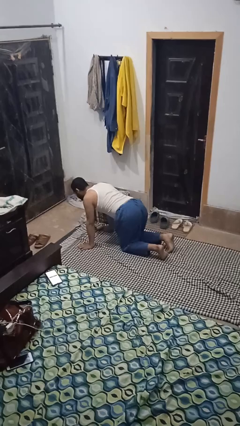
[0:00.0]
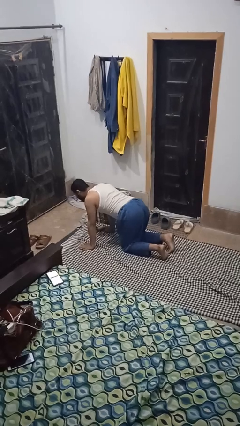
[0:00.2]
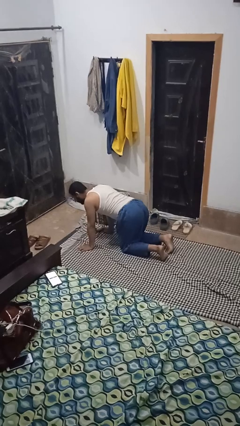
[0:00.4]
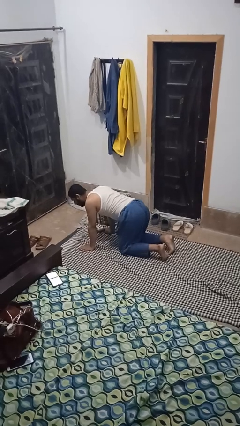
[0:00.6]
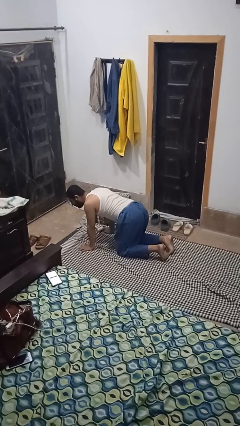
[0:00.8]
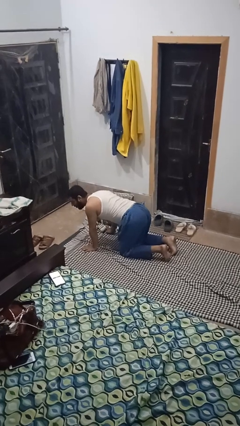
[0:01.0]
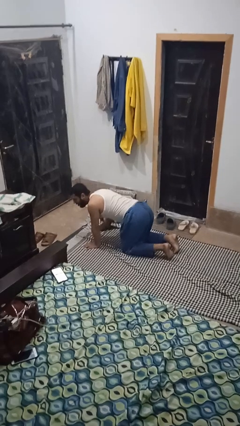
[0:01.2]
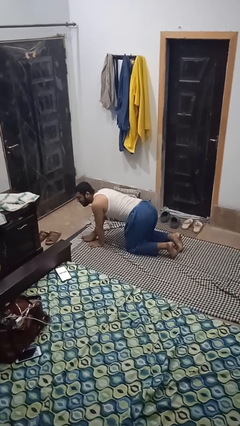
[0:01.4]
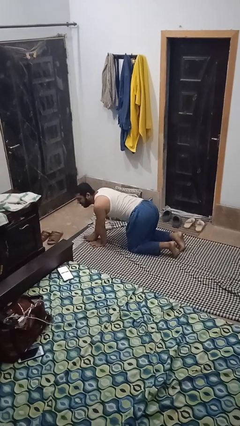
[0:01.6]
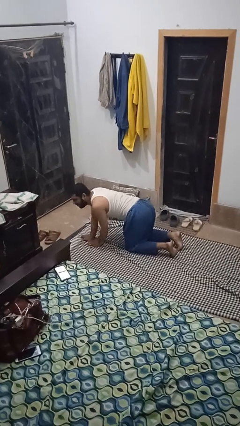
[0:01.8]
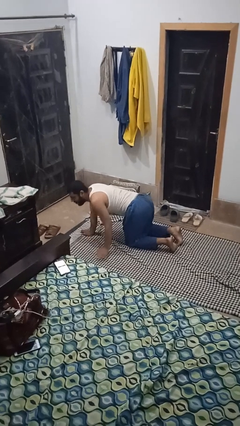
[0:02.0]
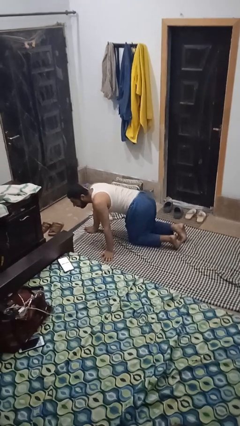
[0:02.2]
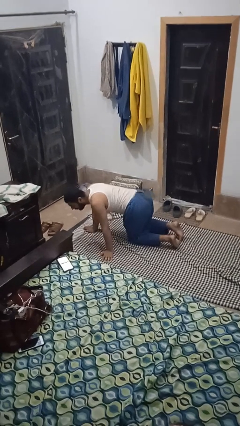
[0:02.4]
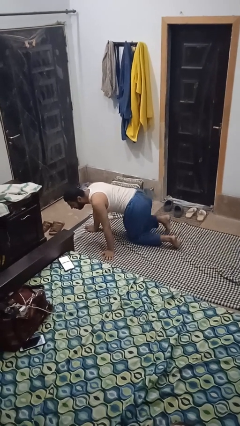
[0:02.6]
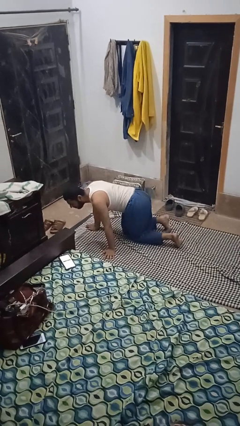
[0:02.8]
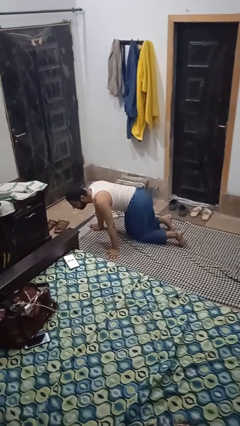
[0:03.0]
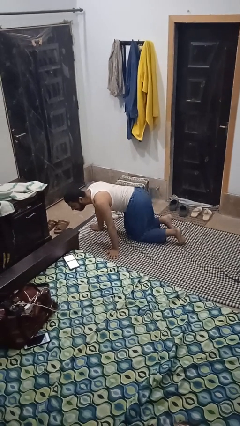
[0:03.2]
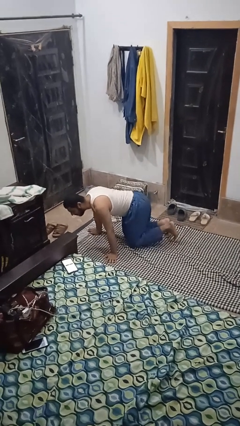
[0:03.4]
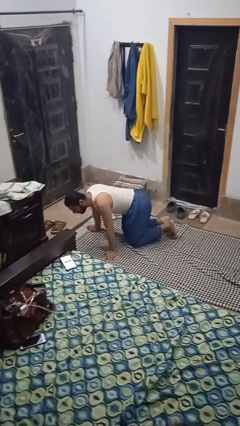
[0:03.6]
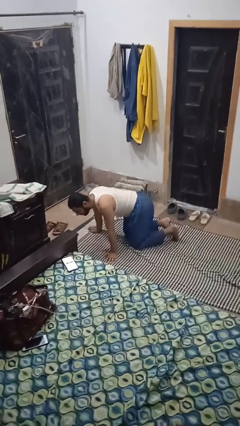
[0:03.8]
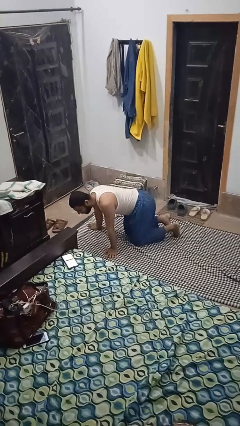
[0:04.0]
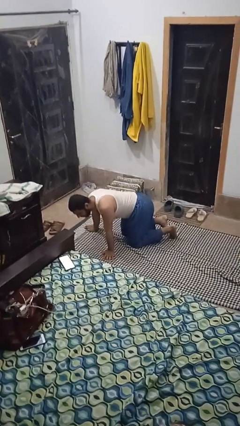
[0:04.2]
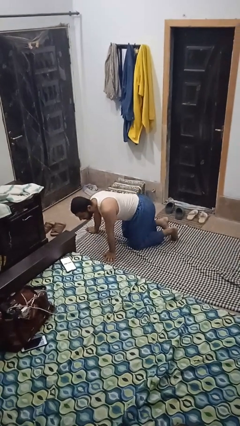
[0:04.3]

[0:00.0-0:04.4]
person crawls

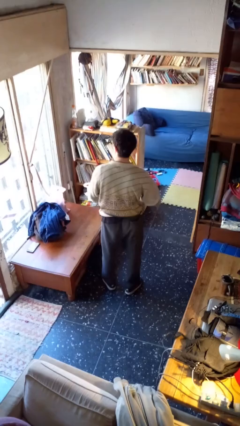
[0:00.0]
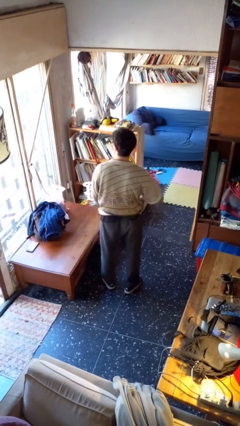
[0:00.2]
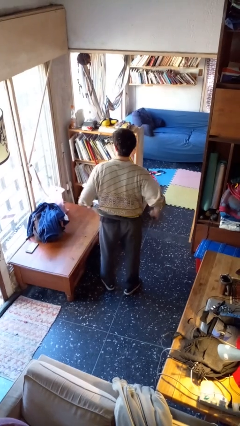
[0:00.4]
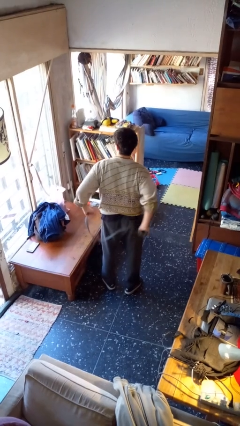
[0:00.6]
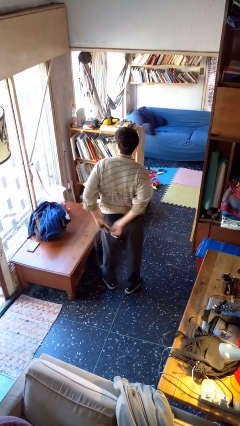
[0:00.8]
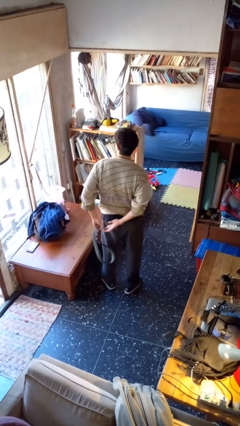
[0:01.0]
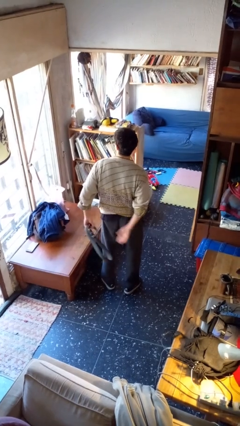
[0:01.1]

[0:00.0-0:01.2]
person takes off belt

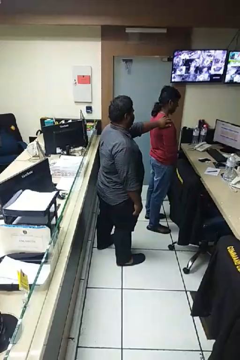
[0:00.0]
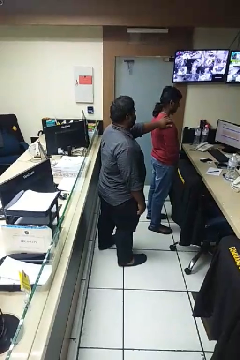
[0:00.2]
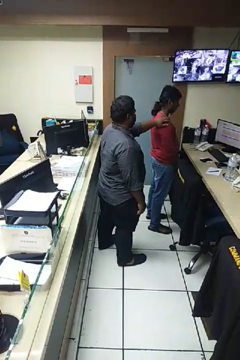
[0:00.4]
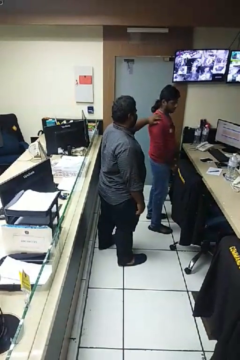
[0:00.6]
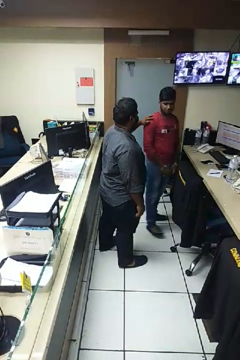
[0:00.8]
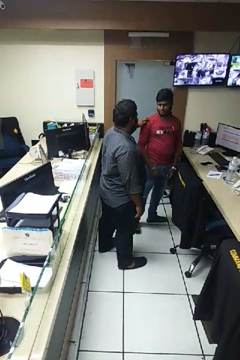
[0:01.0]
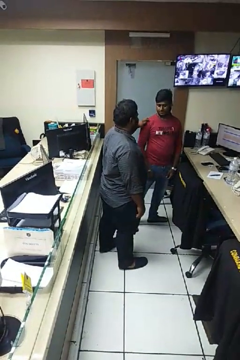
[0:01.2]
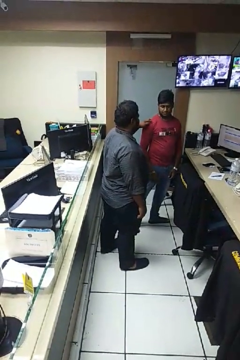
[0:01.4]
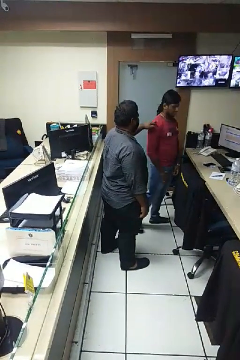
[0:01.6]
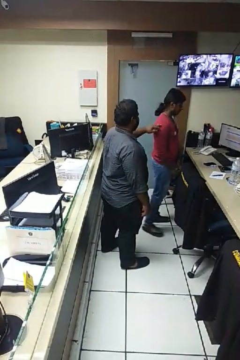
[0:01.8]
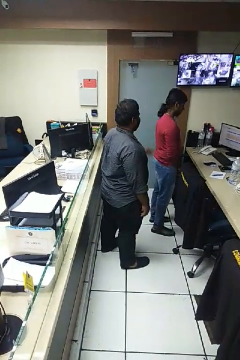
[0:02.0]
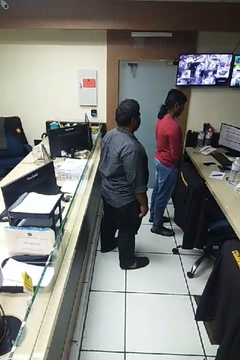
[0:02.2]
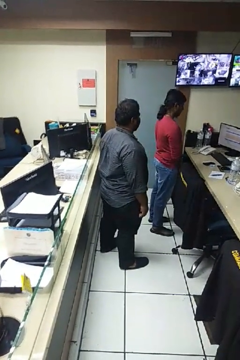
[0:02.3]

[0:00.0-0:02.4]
person spins person around

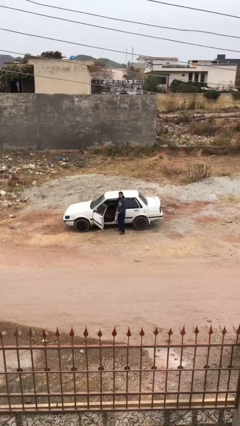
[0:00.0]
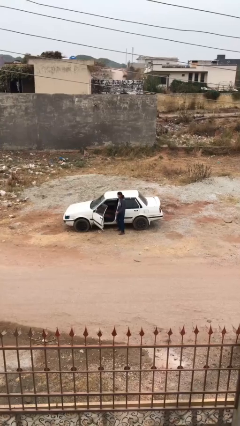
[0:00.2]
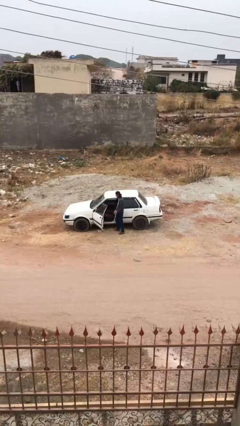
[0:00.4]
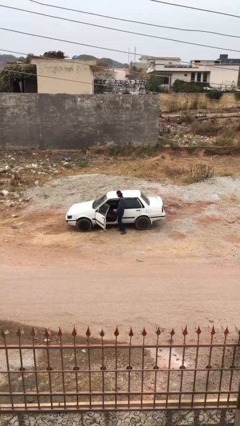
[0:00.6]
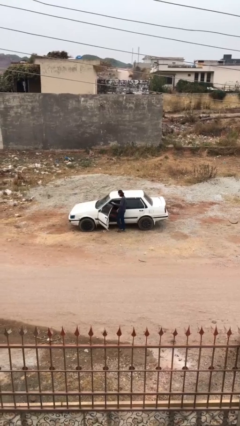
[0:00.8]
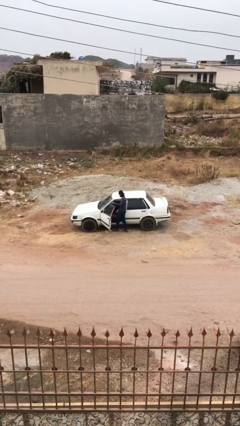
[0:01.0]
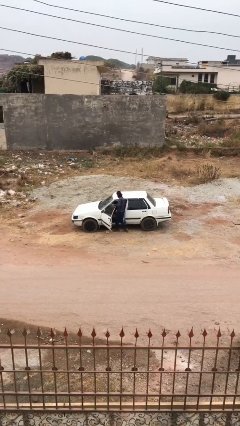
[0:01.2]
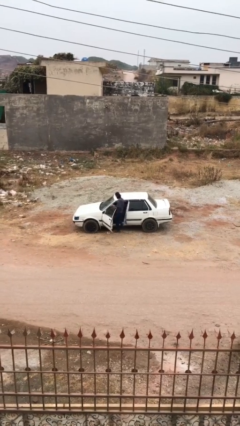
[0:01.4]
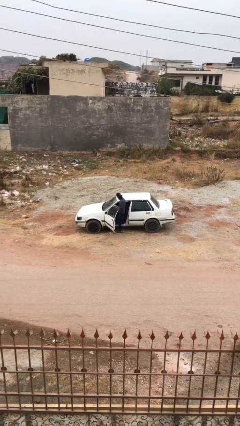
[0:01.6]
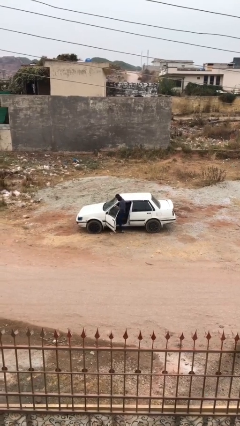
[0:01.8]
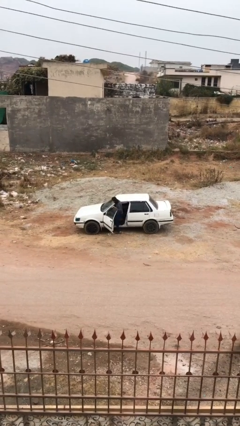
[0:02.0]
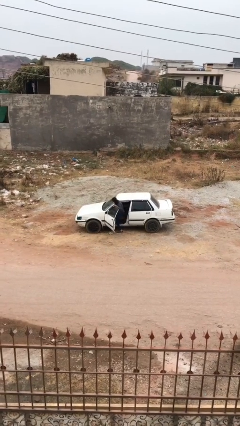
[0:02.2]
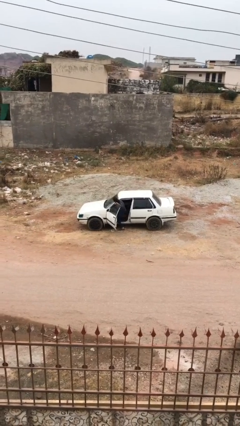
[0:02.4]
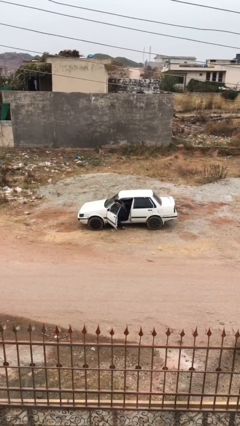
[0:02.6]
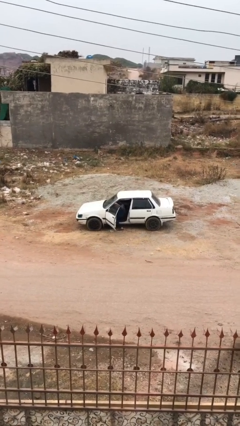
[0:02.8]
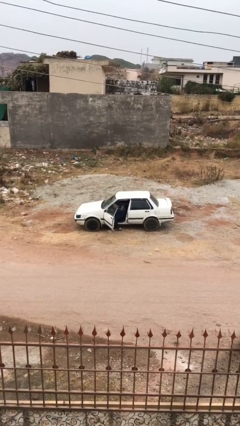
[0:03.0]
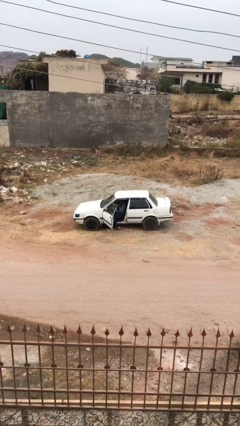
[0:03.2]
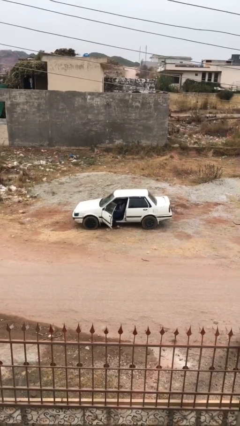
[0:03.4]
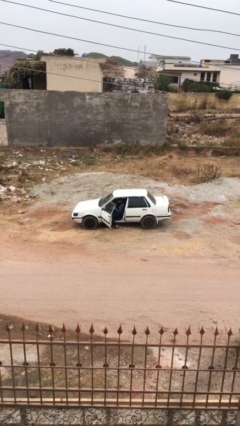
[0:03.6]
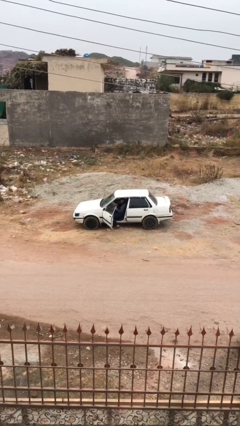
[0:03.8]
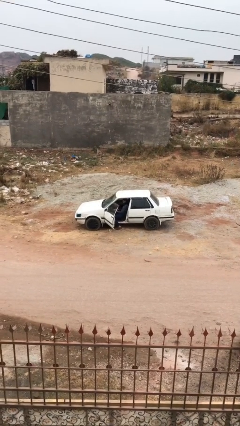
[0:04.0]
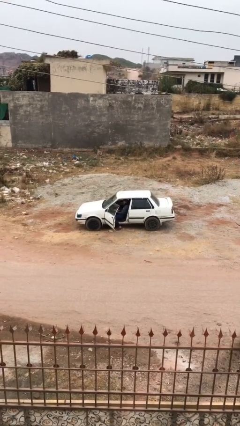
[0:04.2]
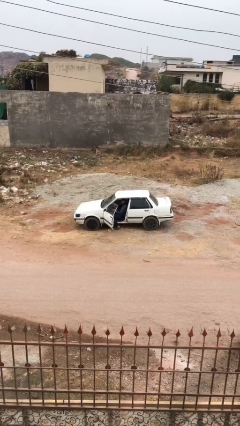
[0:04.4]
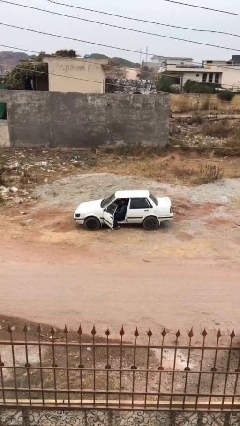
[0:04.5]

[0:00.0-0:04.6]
person enters car

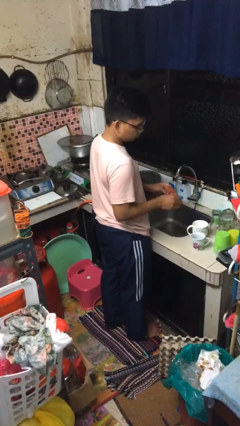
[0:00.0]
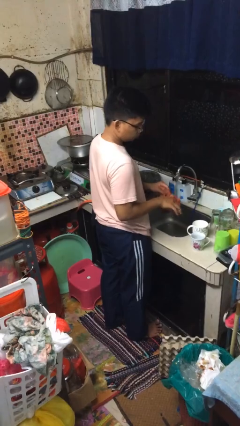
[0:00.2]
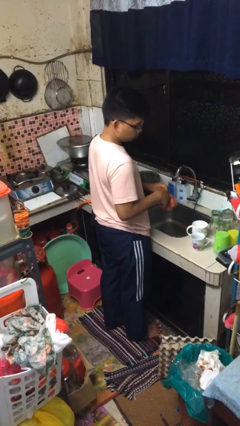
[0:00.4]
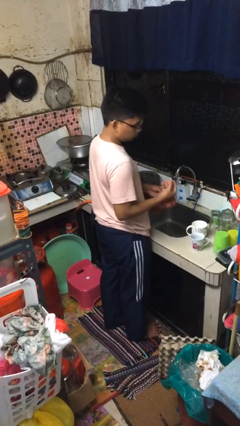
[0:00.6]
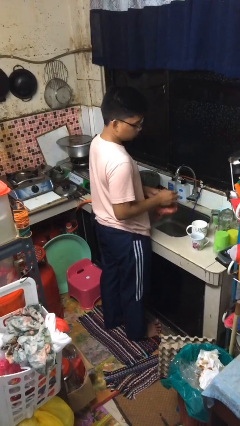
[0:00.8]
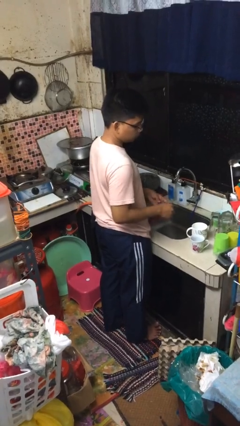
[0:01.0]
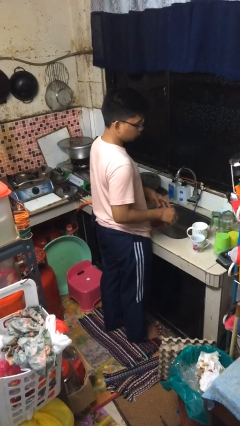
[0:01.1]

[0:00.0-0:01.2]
person dries hands with towel

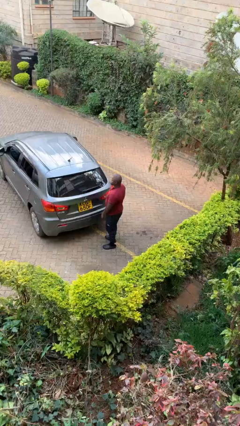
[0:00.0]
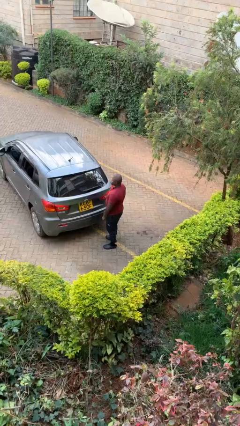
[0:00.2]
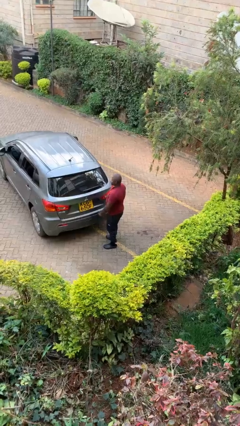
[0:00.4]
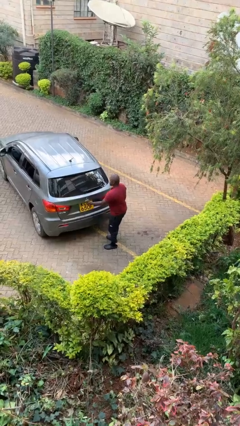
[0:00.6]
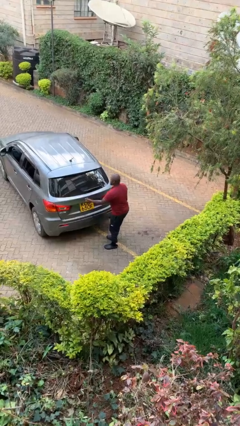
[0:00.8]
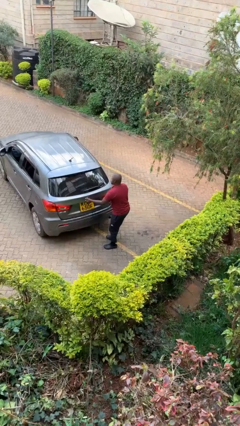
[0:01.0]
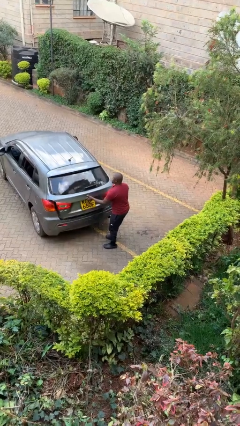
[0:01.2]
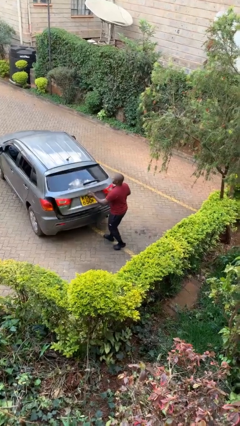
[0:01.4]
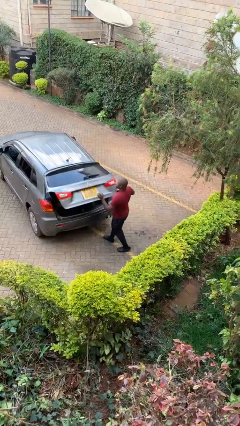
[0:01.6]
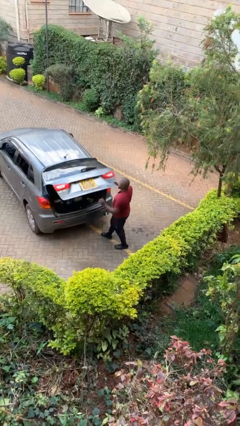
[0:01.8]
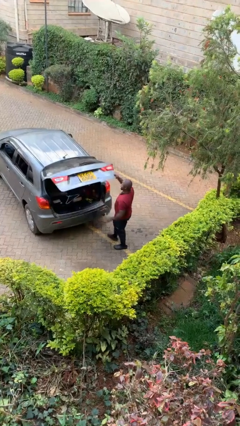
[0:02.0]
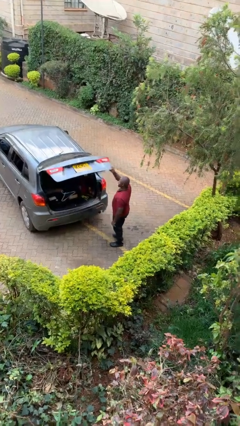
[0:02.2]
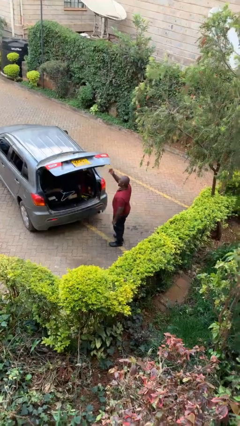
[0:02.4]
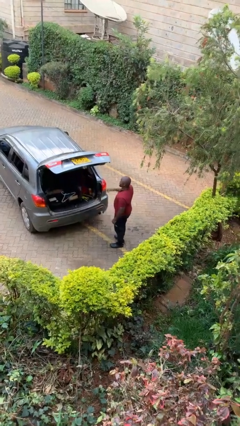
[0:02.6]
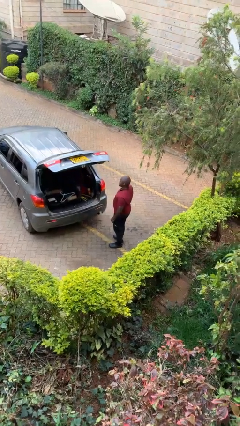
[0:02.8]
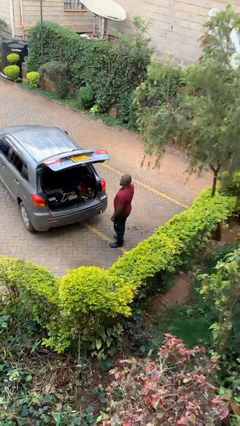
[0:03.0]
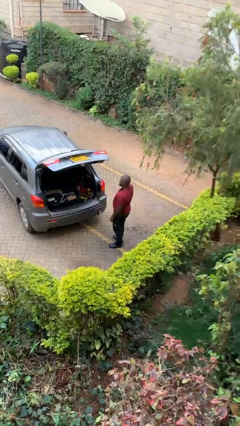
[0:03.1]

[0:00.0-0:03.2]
person opens car trunk

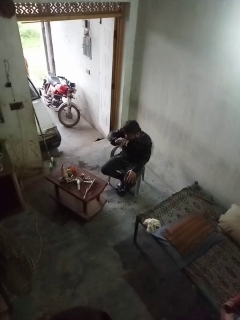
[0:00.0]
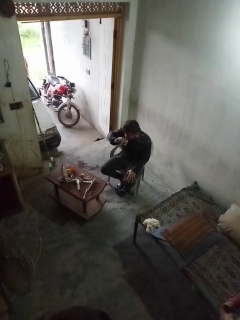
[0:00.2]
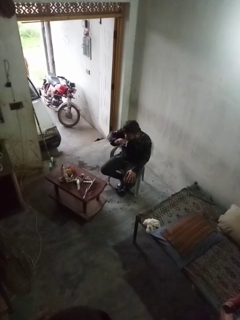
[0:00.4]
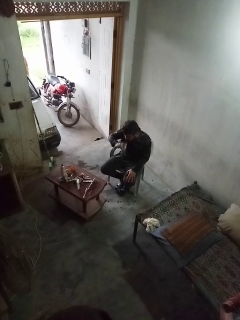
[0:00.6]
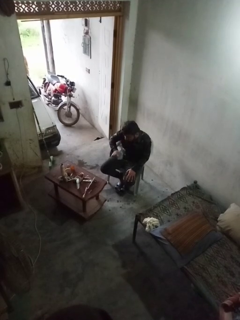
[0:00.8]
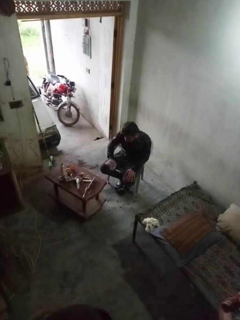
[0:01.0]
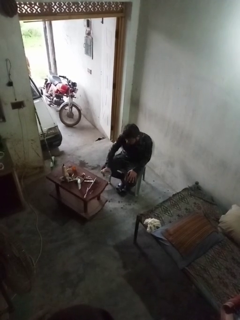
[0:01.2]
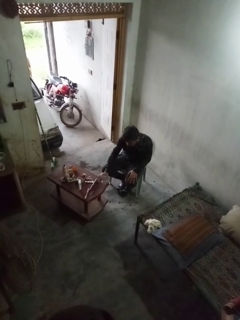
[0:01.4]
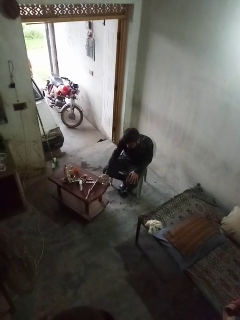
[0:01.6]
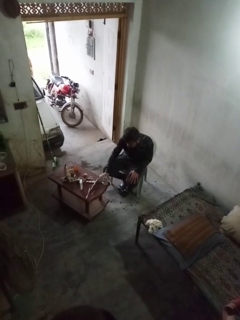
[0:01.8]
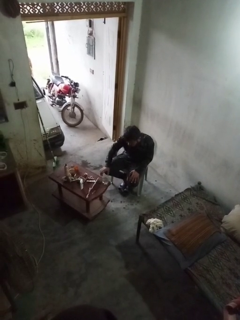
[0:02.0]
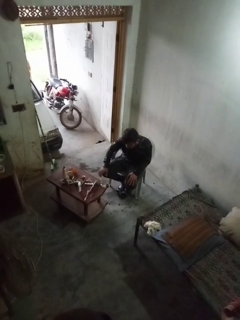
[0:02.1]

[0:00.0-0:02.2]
person puts down object on table
